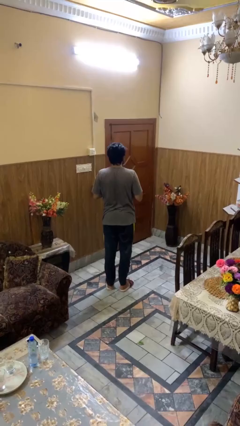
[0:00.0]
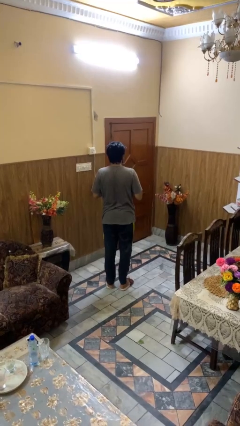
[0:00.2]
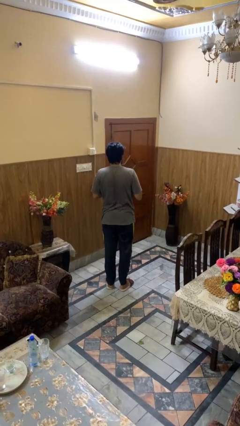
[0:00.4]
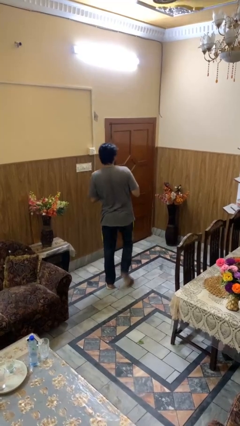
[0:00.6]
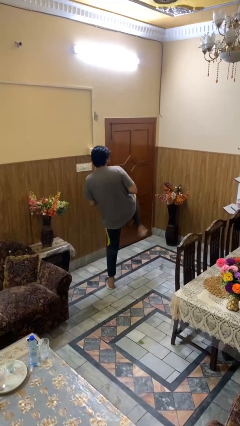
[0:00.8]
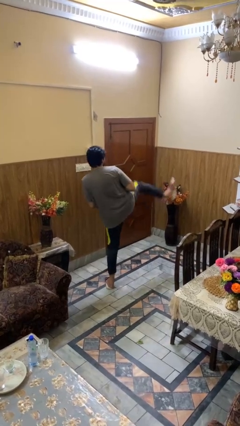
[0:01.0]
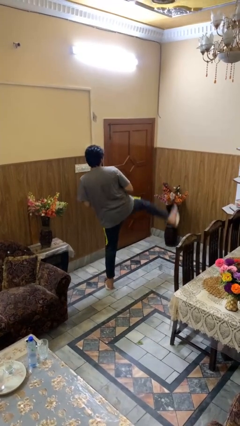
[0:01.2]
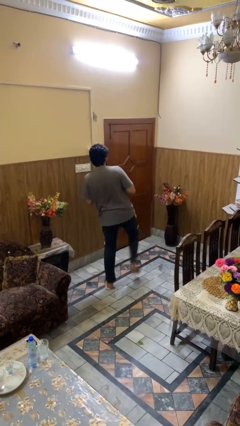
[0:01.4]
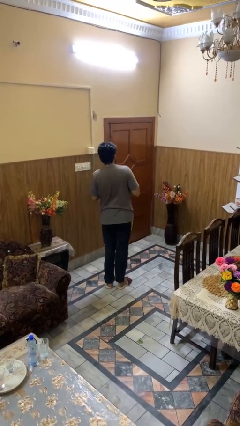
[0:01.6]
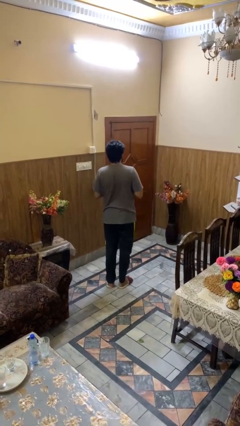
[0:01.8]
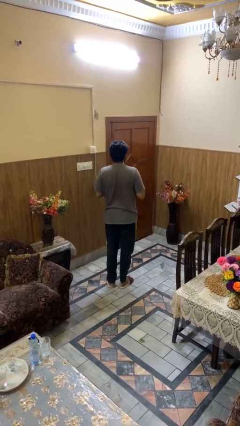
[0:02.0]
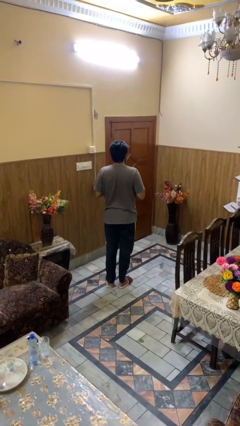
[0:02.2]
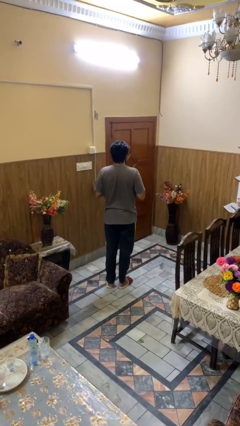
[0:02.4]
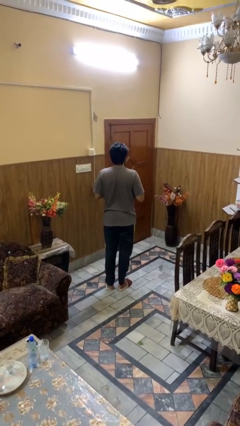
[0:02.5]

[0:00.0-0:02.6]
person karate kicks

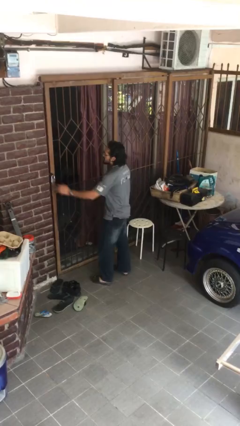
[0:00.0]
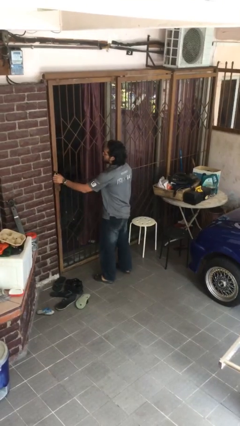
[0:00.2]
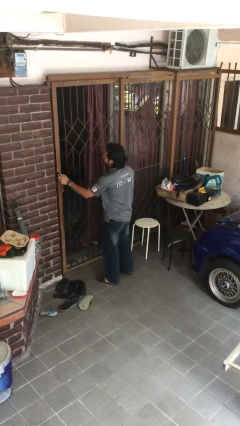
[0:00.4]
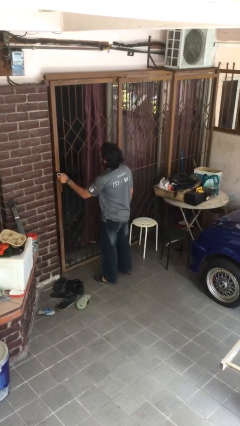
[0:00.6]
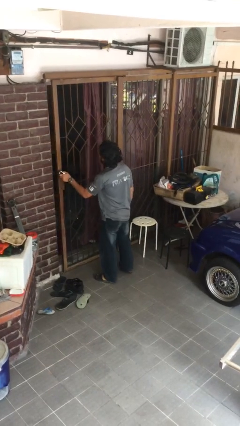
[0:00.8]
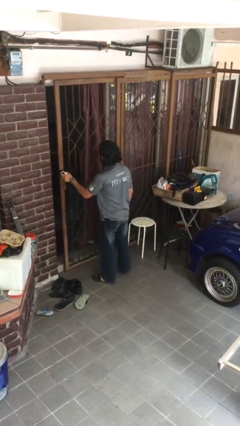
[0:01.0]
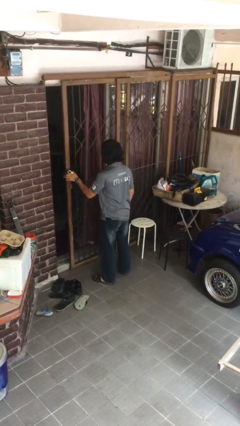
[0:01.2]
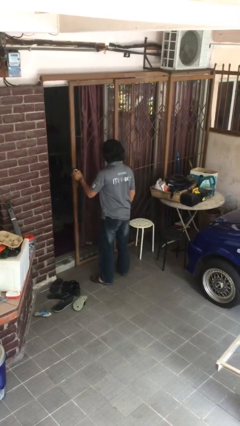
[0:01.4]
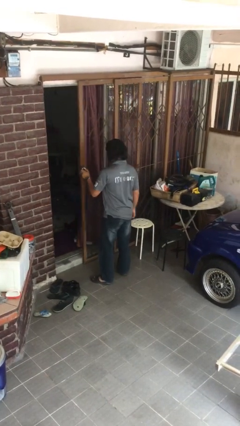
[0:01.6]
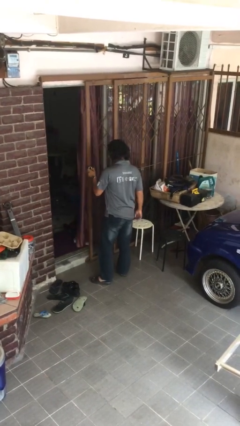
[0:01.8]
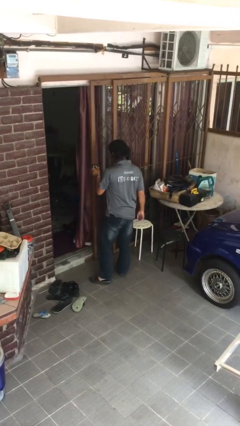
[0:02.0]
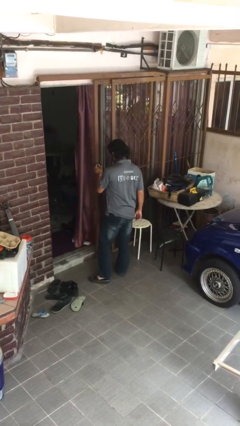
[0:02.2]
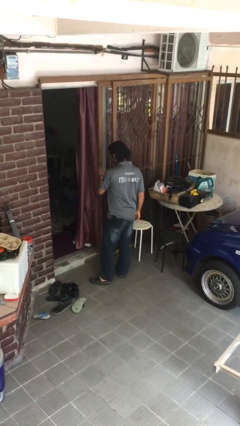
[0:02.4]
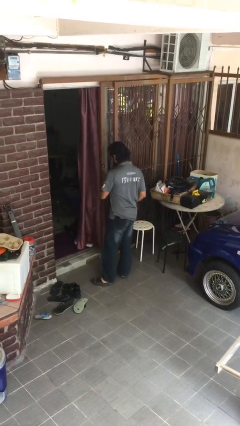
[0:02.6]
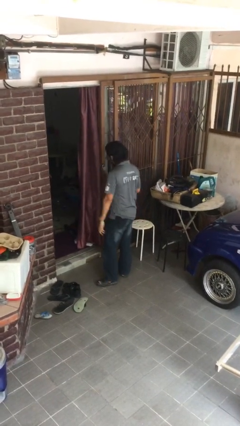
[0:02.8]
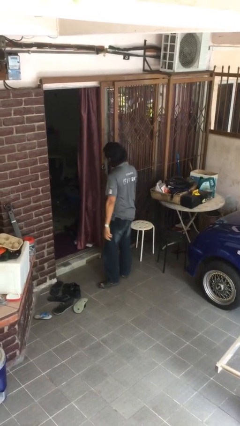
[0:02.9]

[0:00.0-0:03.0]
person opens facility door

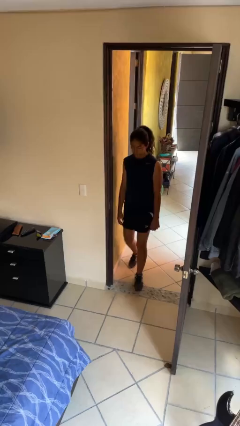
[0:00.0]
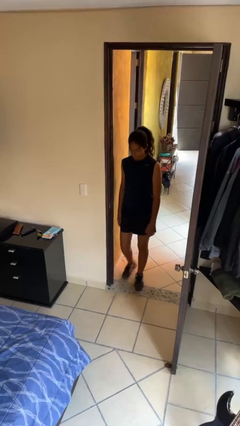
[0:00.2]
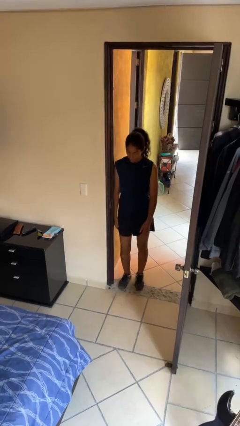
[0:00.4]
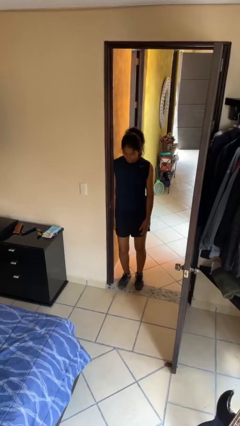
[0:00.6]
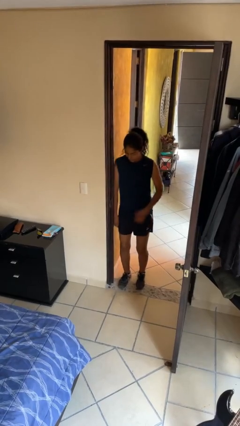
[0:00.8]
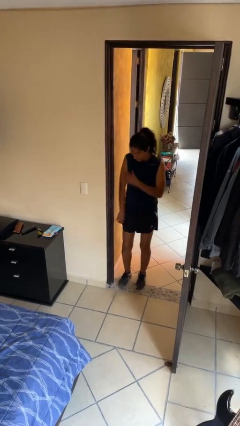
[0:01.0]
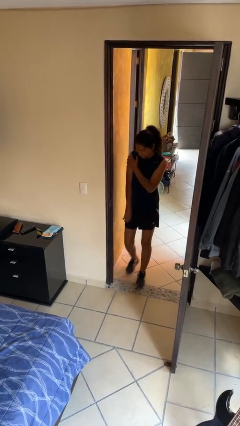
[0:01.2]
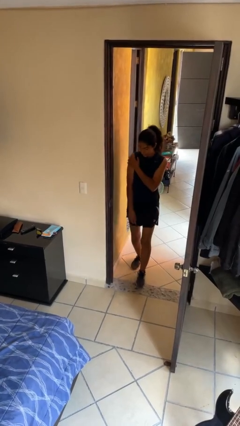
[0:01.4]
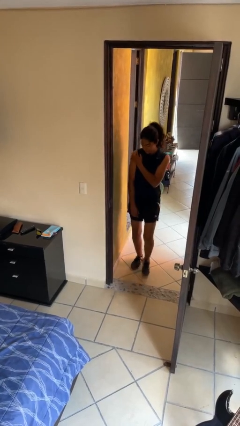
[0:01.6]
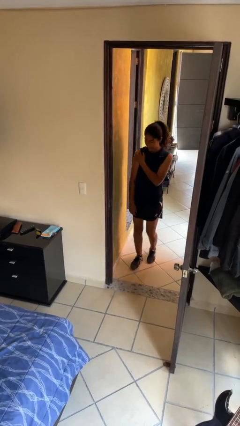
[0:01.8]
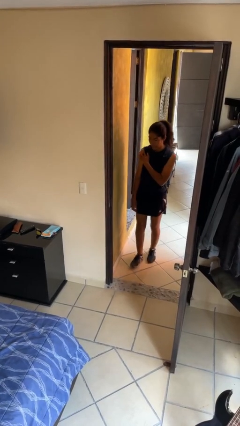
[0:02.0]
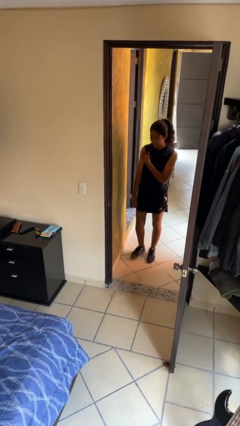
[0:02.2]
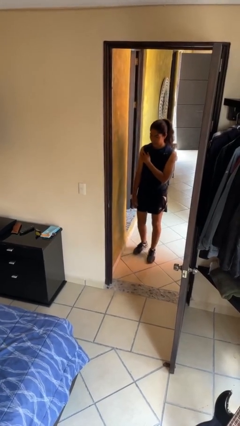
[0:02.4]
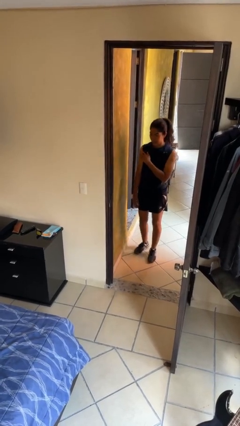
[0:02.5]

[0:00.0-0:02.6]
person bumps into wall

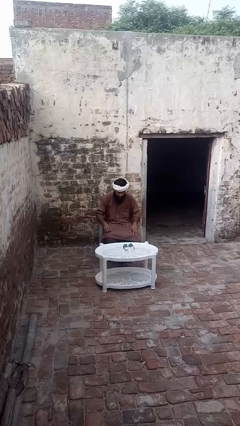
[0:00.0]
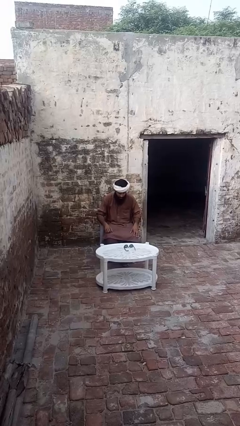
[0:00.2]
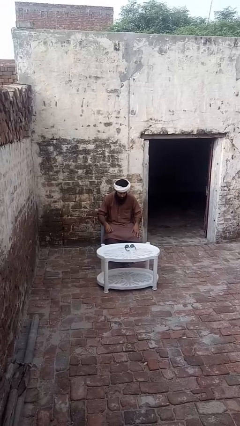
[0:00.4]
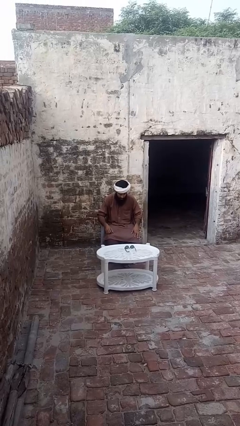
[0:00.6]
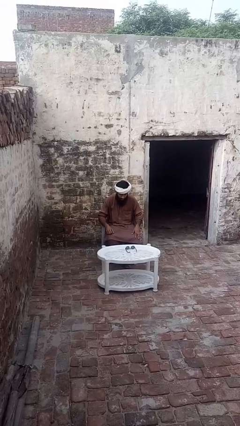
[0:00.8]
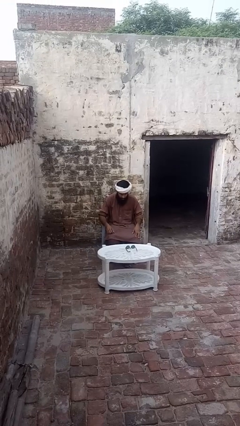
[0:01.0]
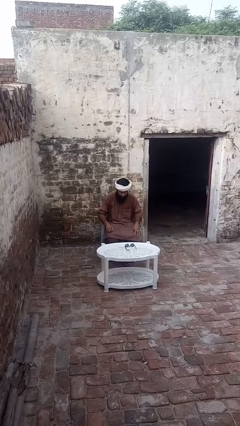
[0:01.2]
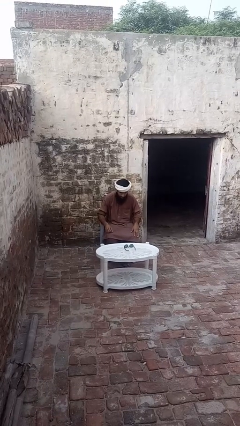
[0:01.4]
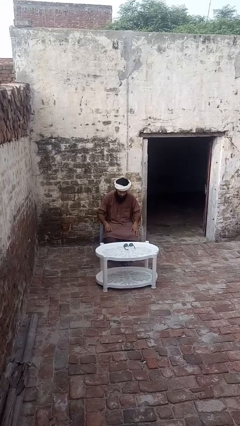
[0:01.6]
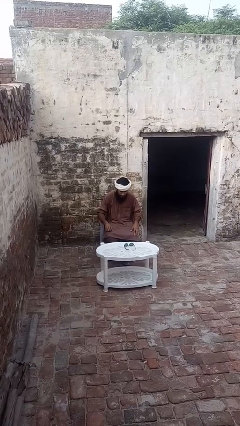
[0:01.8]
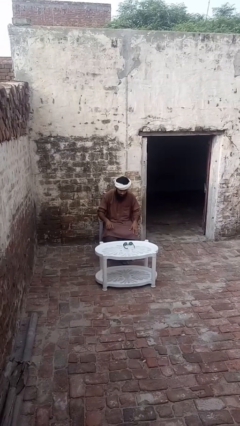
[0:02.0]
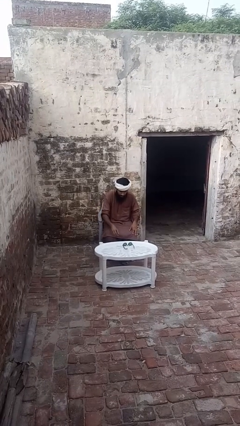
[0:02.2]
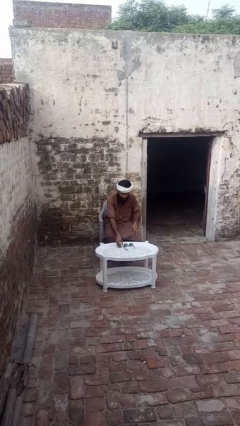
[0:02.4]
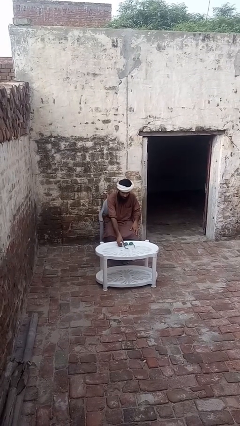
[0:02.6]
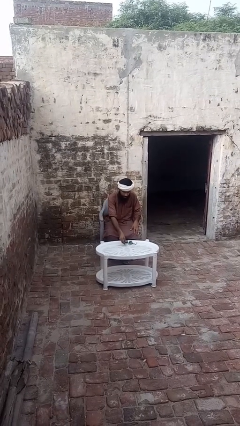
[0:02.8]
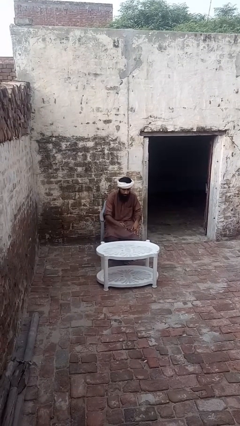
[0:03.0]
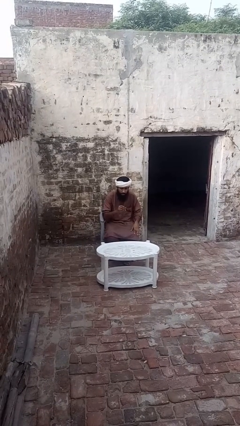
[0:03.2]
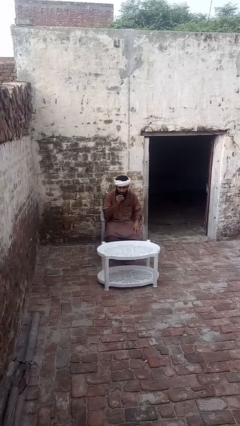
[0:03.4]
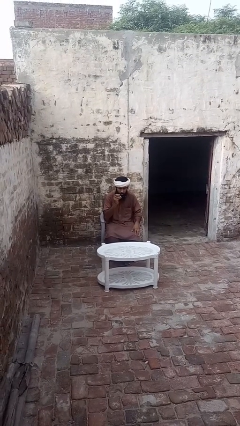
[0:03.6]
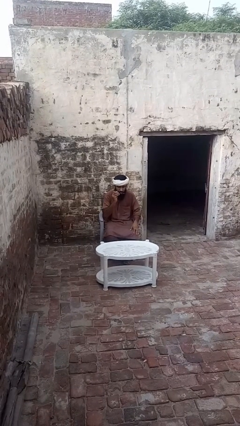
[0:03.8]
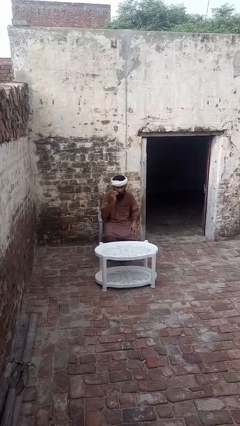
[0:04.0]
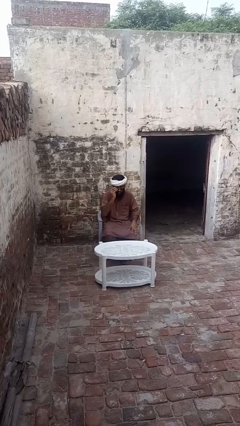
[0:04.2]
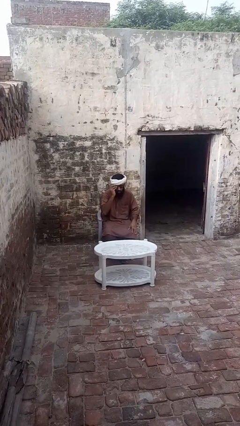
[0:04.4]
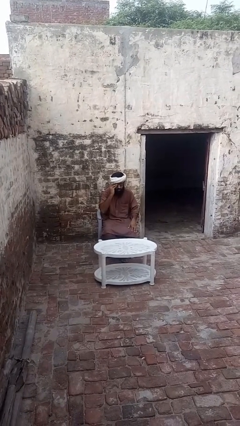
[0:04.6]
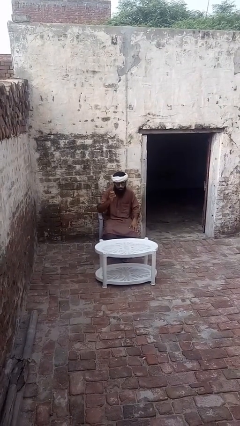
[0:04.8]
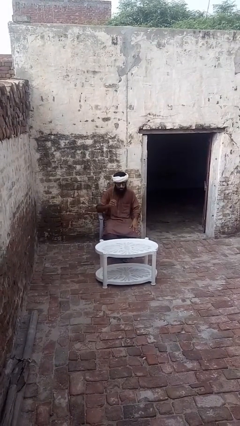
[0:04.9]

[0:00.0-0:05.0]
person puts on sunglasses

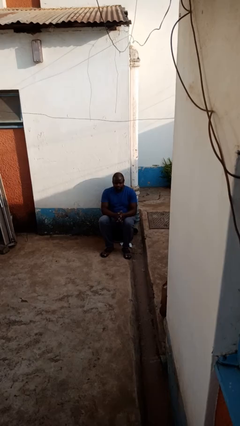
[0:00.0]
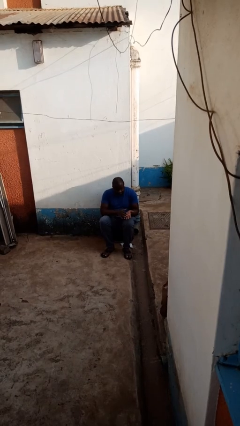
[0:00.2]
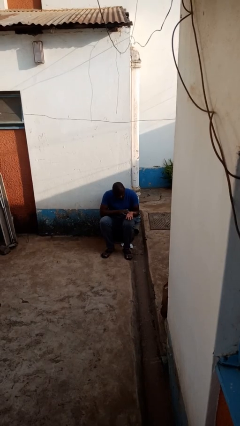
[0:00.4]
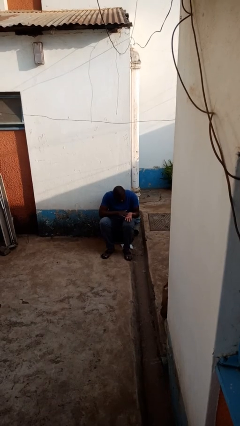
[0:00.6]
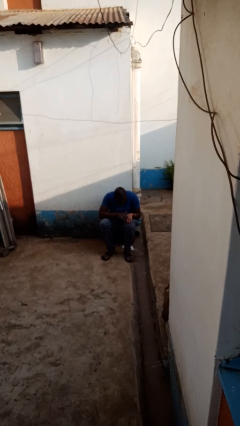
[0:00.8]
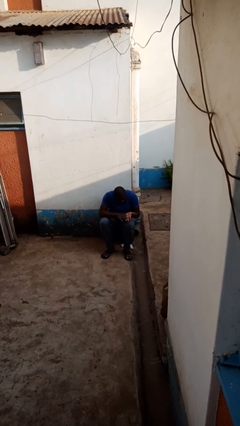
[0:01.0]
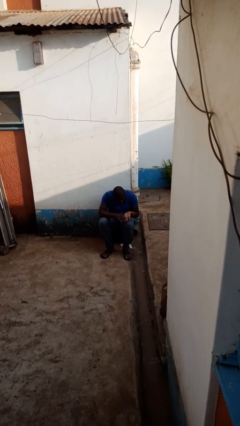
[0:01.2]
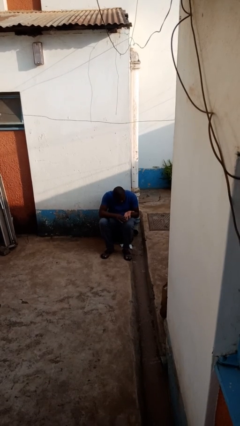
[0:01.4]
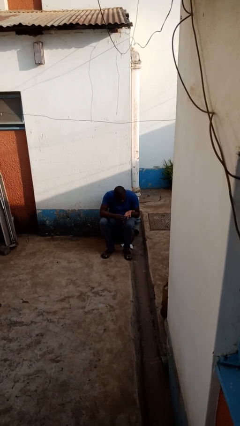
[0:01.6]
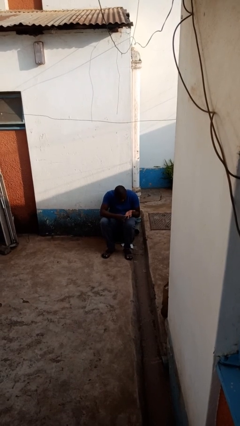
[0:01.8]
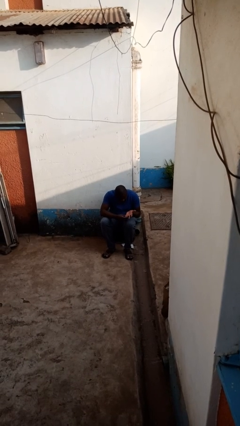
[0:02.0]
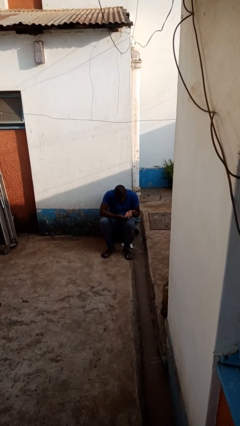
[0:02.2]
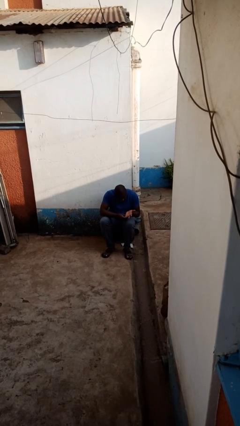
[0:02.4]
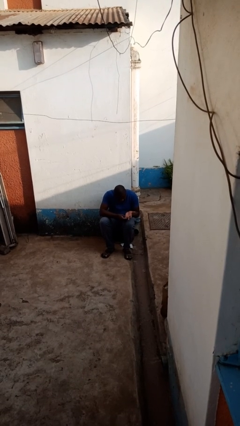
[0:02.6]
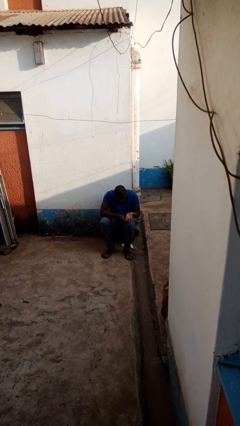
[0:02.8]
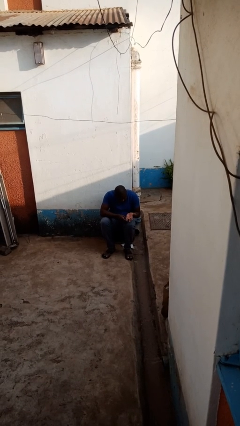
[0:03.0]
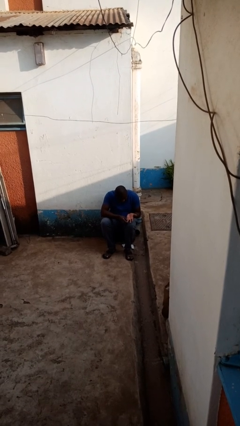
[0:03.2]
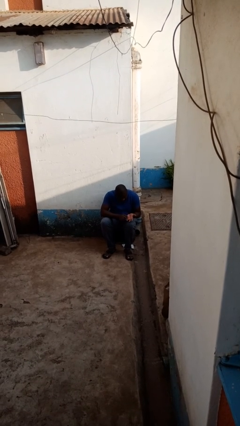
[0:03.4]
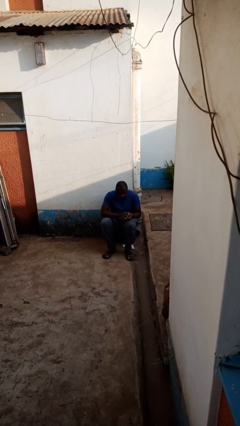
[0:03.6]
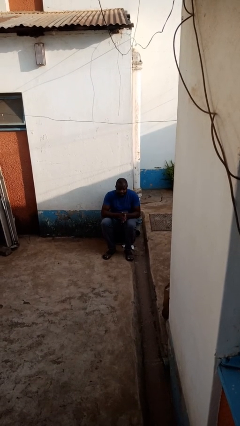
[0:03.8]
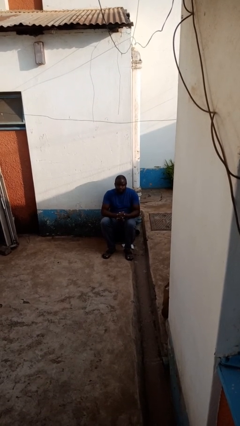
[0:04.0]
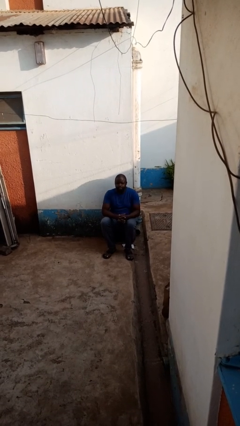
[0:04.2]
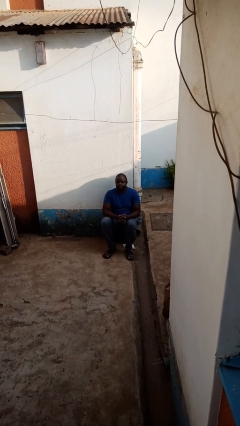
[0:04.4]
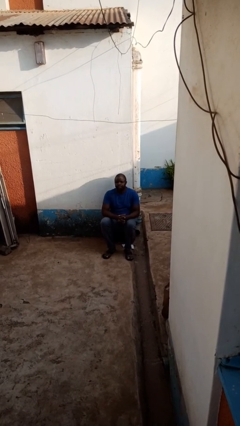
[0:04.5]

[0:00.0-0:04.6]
person looks at hands in lap
